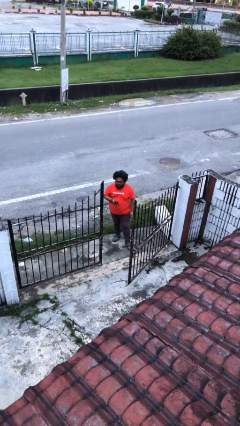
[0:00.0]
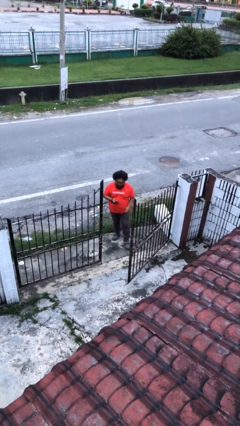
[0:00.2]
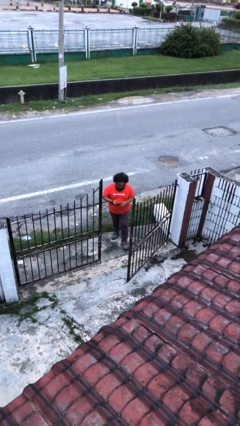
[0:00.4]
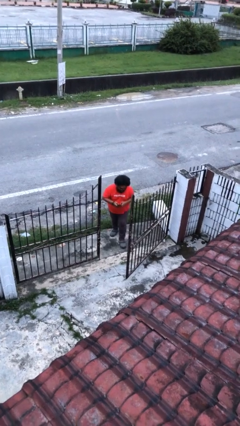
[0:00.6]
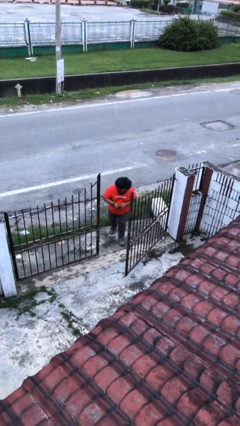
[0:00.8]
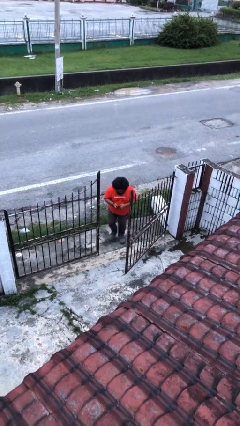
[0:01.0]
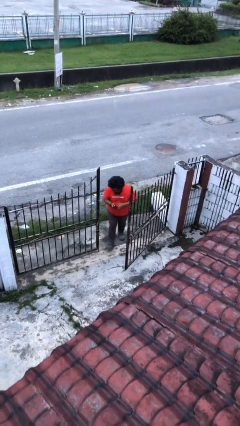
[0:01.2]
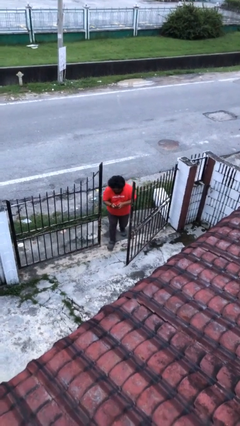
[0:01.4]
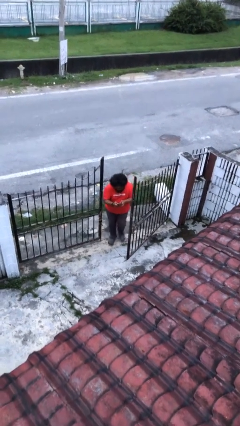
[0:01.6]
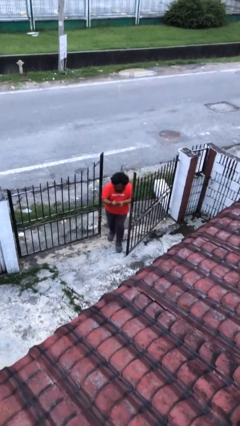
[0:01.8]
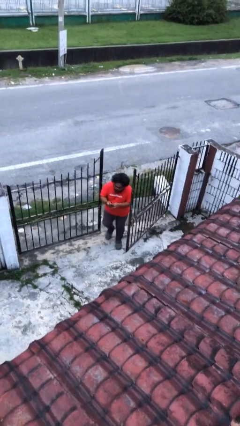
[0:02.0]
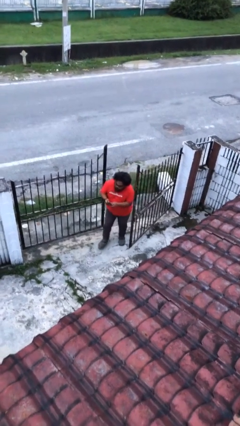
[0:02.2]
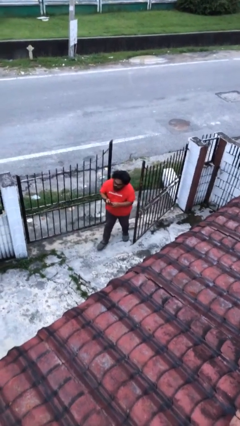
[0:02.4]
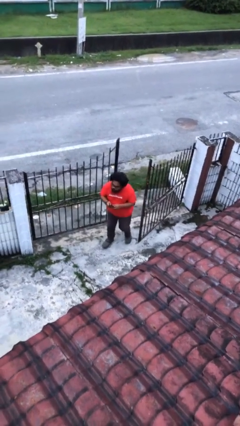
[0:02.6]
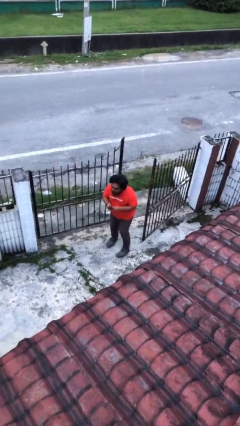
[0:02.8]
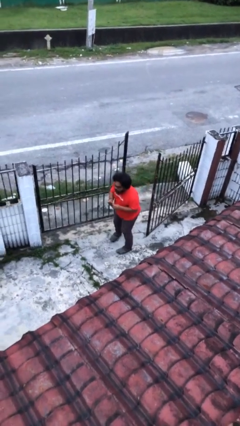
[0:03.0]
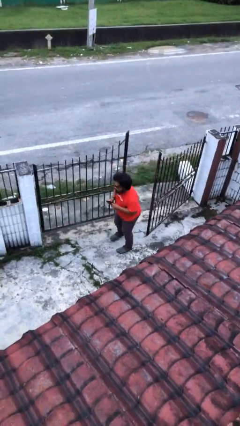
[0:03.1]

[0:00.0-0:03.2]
person enters scene through structure

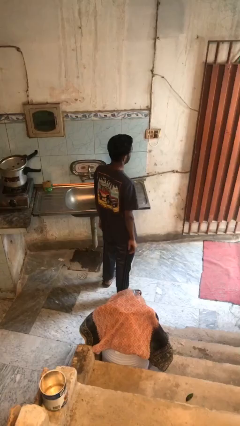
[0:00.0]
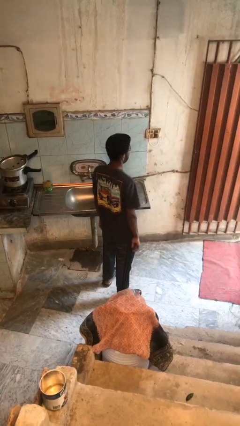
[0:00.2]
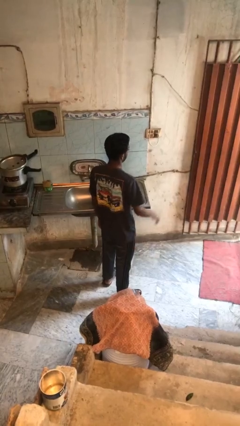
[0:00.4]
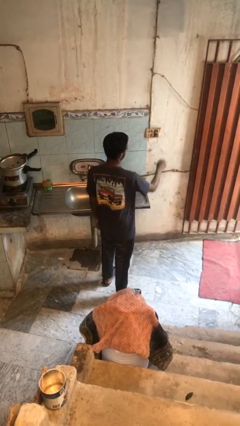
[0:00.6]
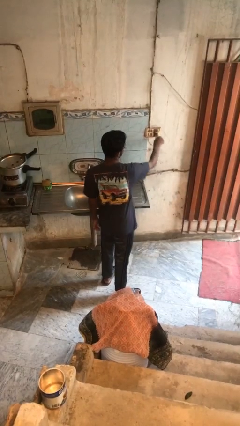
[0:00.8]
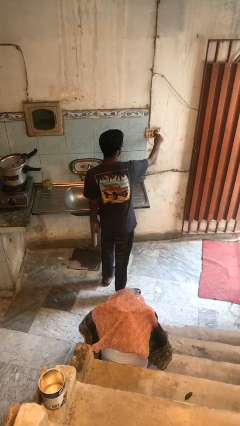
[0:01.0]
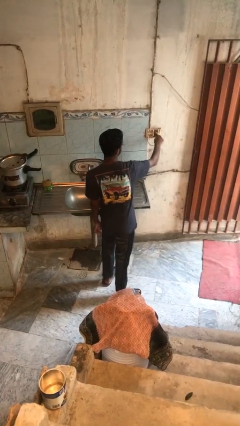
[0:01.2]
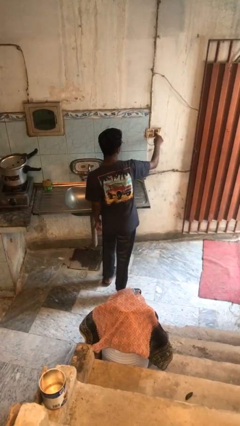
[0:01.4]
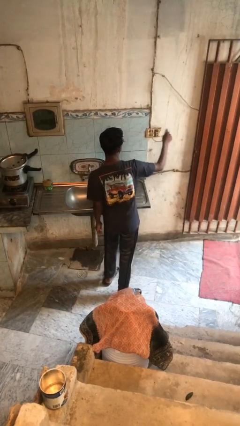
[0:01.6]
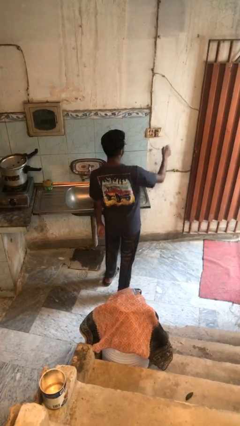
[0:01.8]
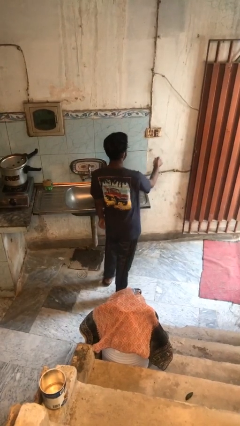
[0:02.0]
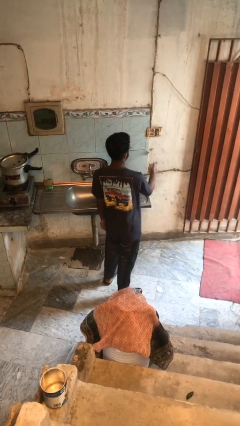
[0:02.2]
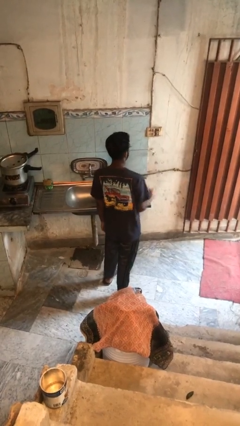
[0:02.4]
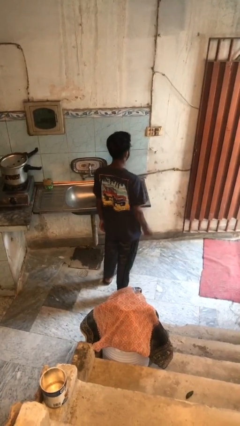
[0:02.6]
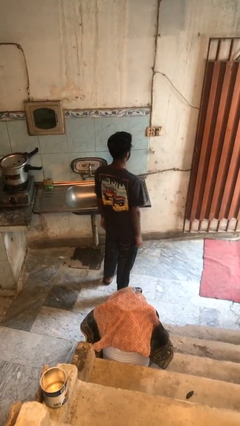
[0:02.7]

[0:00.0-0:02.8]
person unplugs from electrical socket

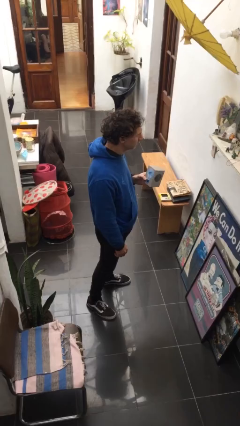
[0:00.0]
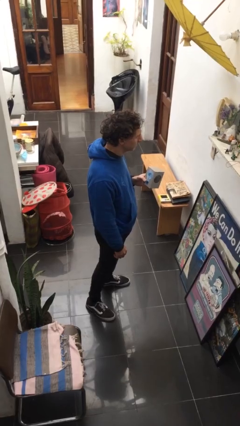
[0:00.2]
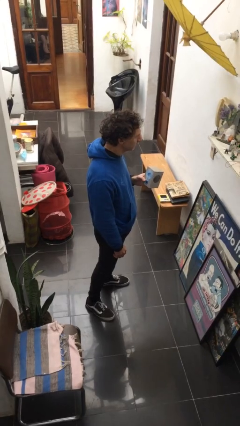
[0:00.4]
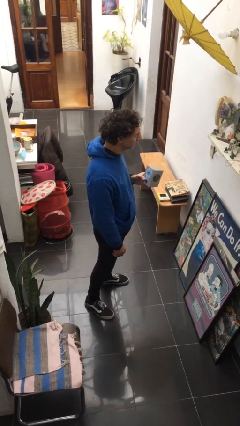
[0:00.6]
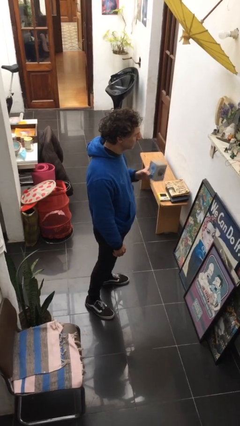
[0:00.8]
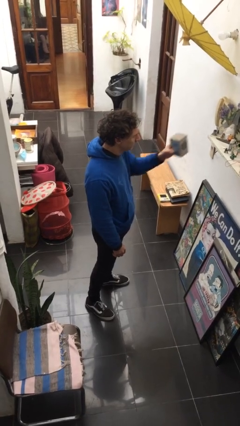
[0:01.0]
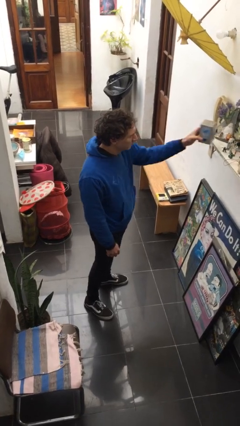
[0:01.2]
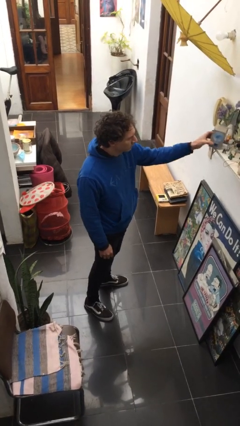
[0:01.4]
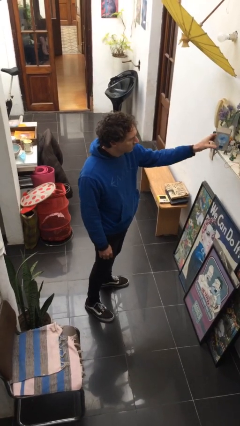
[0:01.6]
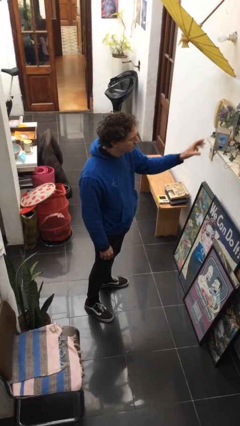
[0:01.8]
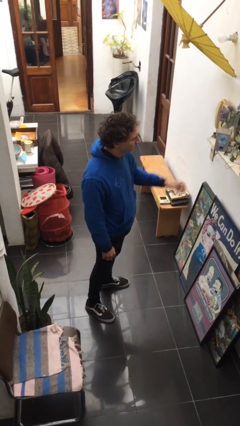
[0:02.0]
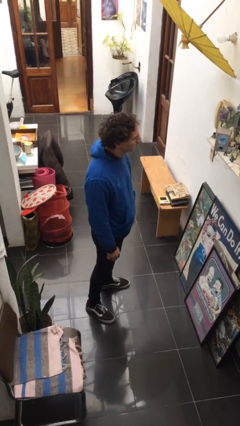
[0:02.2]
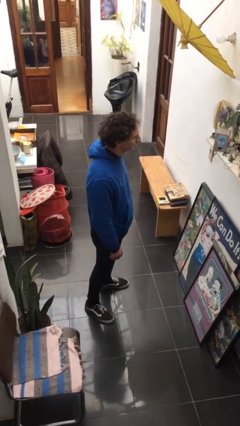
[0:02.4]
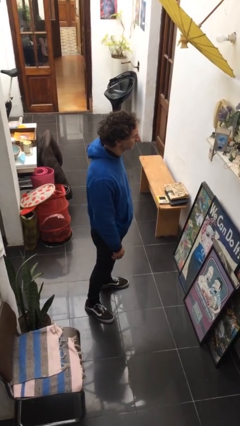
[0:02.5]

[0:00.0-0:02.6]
person puts down object on countertop

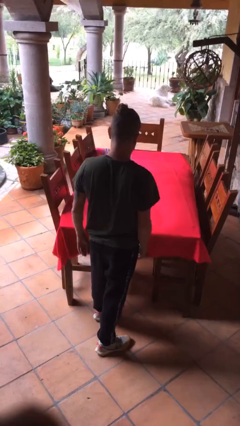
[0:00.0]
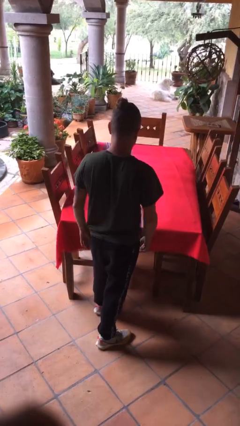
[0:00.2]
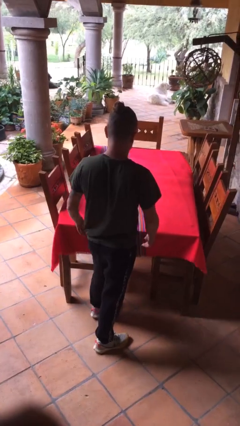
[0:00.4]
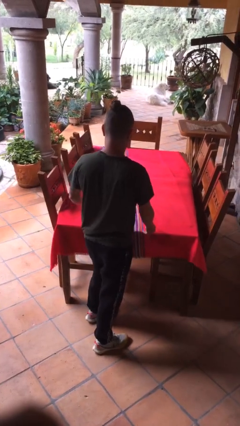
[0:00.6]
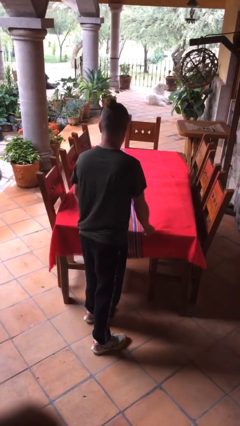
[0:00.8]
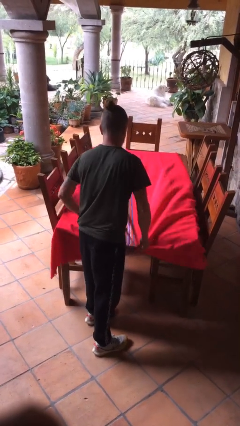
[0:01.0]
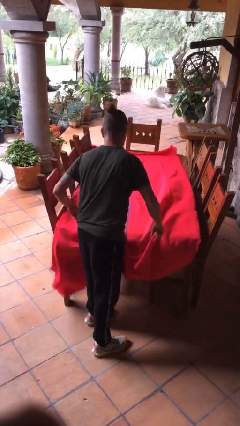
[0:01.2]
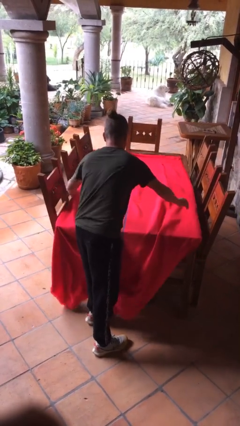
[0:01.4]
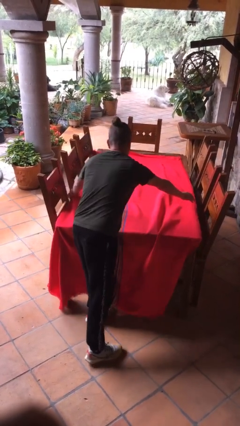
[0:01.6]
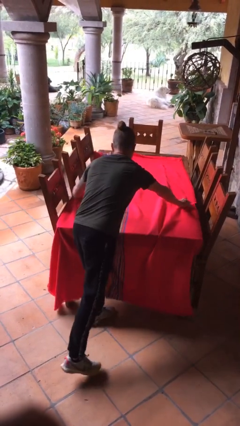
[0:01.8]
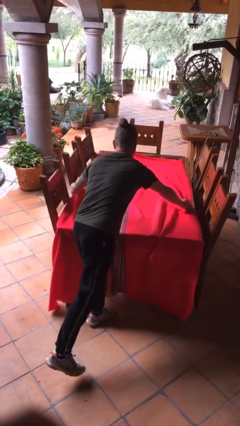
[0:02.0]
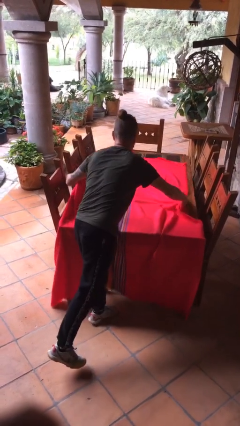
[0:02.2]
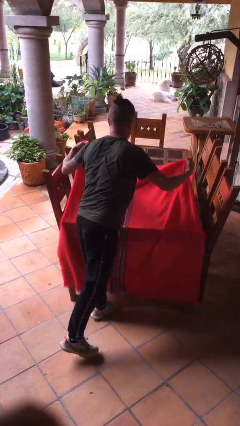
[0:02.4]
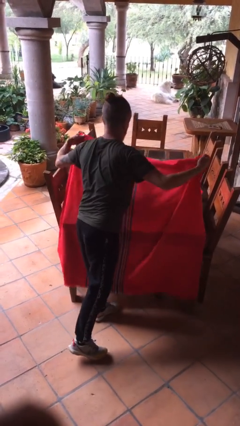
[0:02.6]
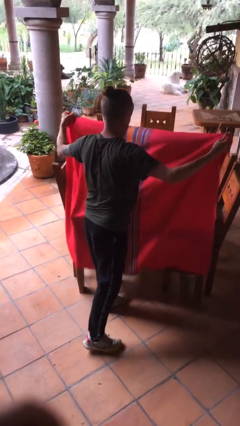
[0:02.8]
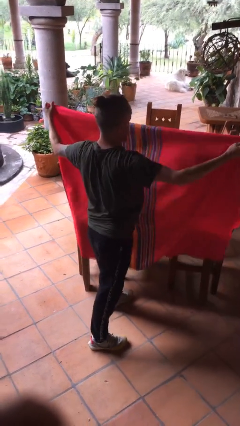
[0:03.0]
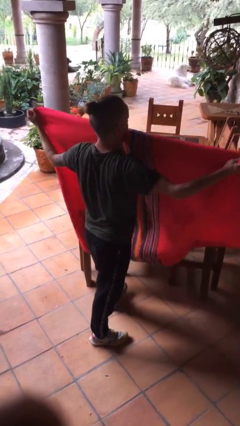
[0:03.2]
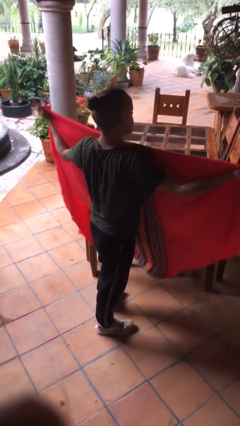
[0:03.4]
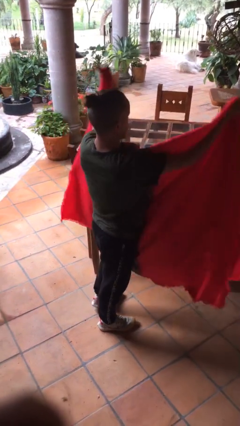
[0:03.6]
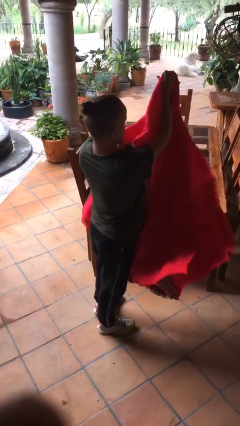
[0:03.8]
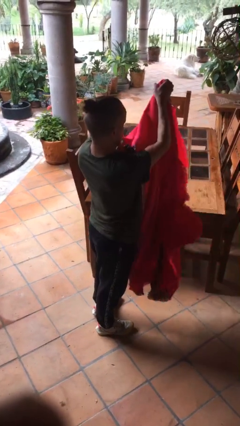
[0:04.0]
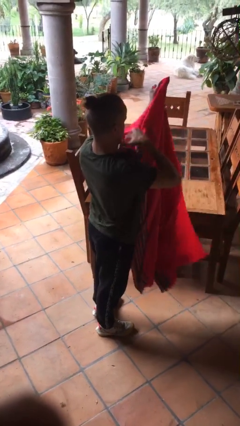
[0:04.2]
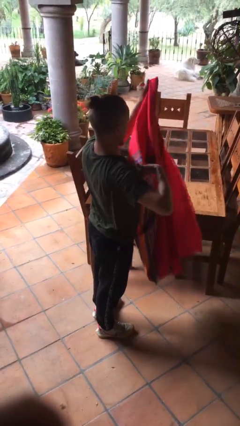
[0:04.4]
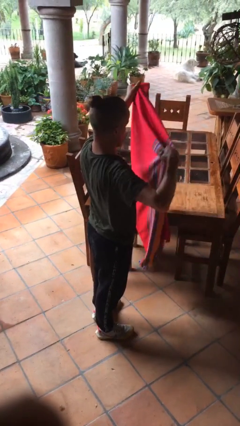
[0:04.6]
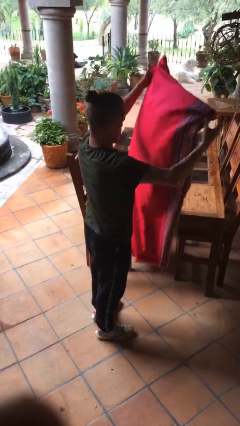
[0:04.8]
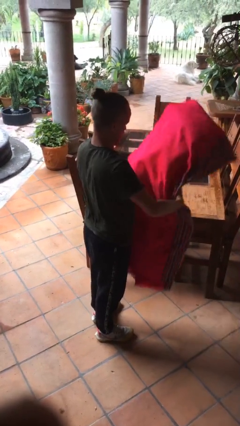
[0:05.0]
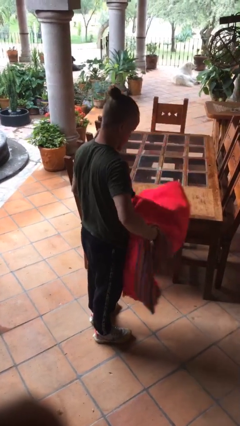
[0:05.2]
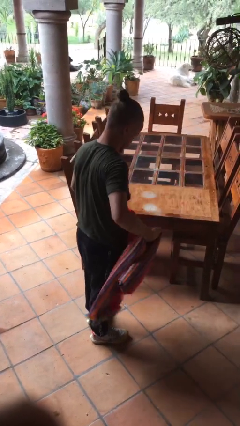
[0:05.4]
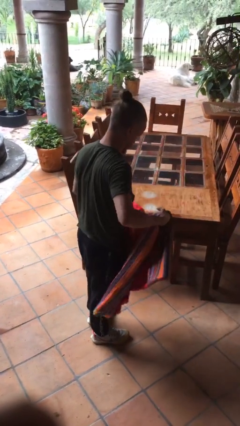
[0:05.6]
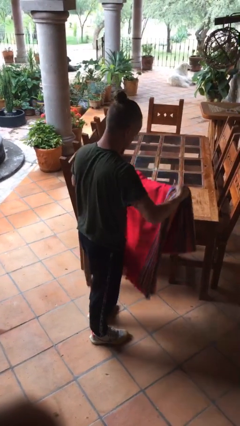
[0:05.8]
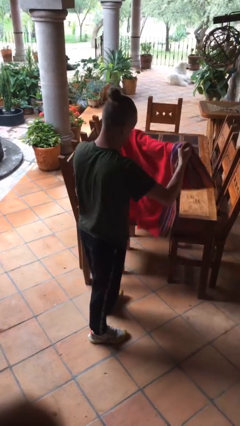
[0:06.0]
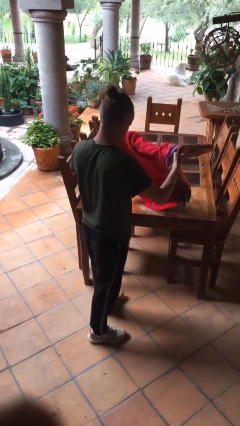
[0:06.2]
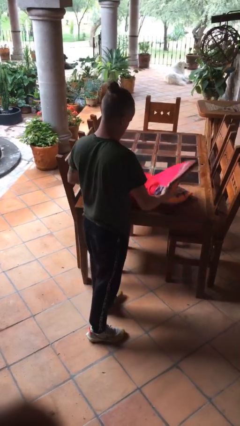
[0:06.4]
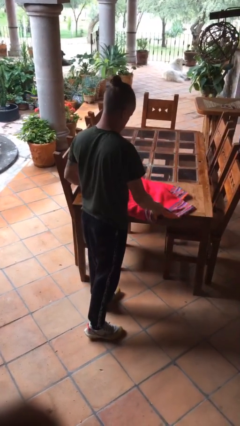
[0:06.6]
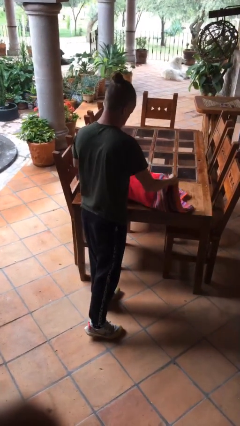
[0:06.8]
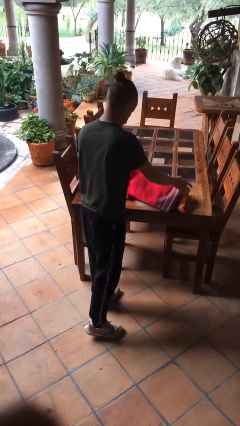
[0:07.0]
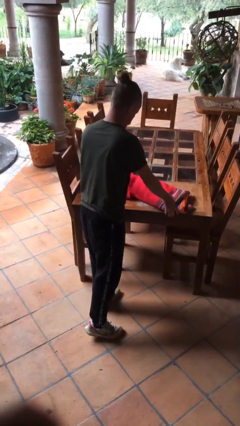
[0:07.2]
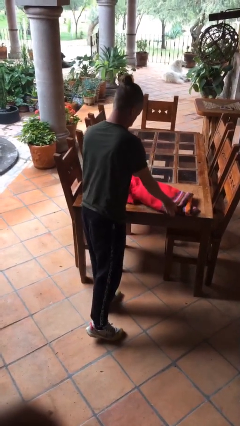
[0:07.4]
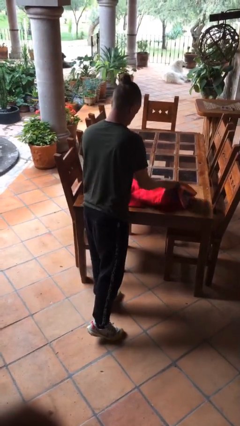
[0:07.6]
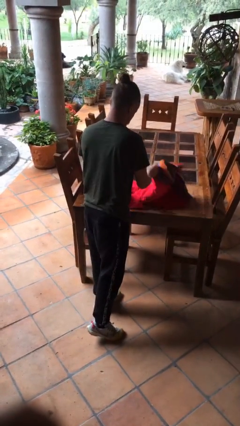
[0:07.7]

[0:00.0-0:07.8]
person folds tablecloth

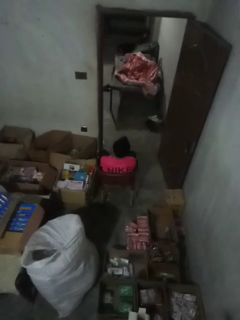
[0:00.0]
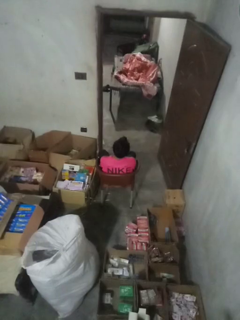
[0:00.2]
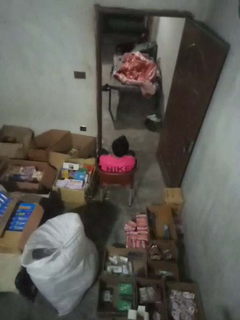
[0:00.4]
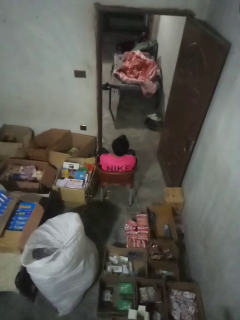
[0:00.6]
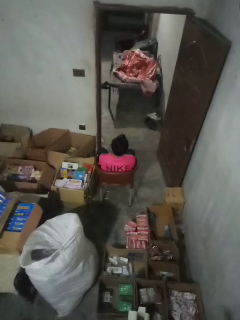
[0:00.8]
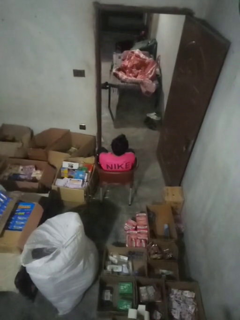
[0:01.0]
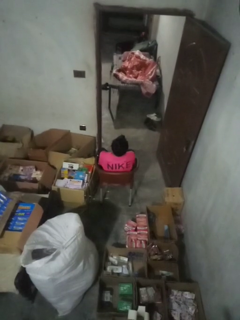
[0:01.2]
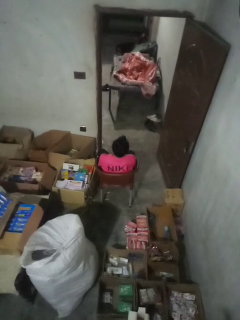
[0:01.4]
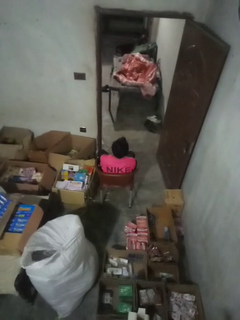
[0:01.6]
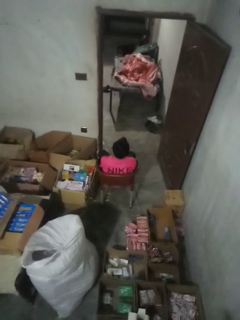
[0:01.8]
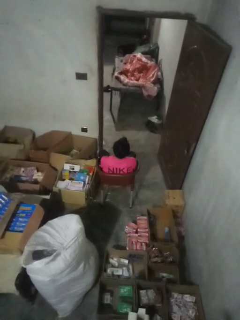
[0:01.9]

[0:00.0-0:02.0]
person shrugs
